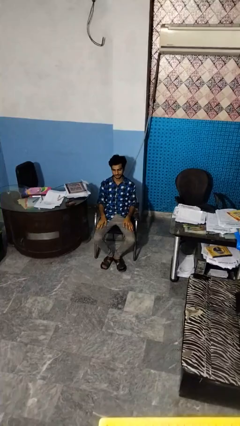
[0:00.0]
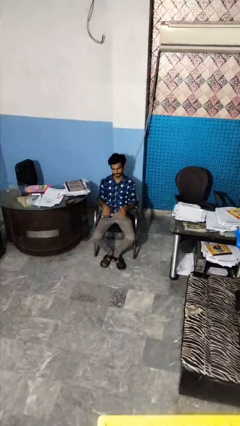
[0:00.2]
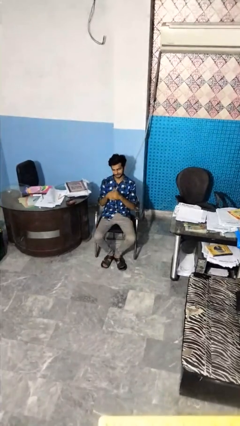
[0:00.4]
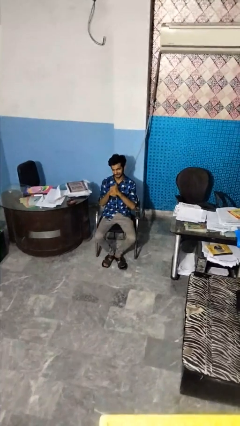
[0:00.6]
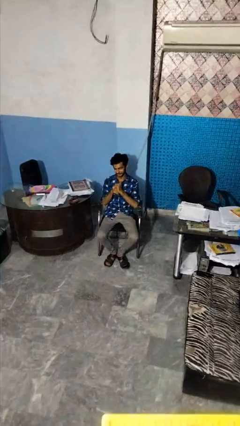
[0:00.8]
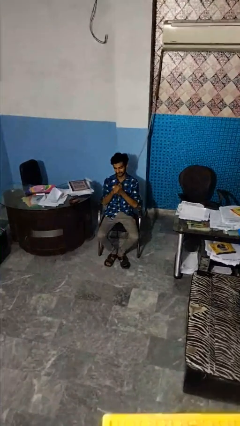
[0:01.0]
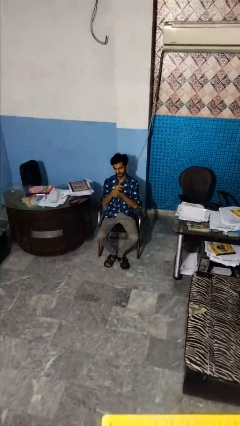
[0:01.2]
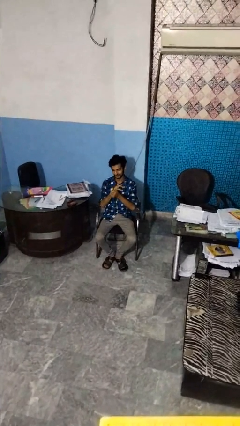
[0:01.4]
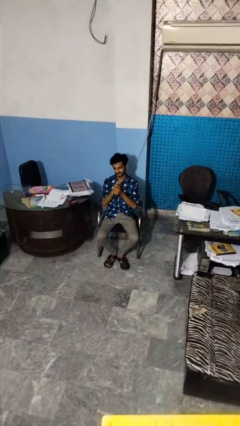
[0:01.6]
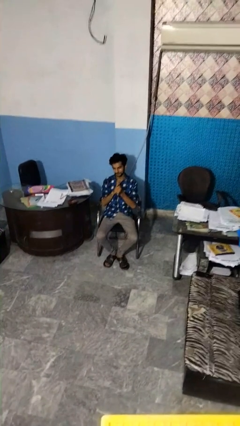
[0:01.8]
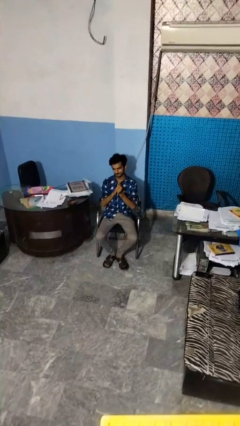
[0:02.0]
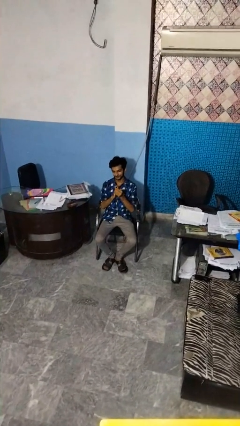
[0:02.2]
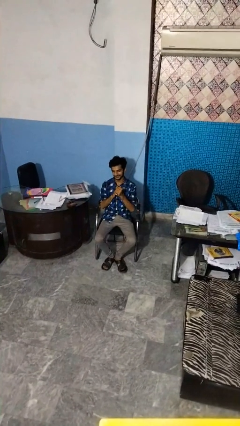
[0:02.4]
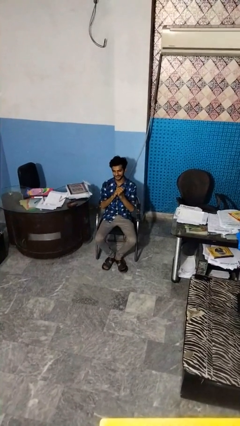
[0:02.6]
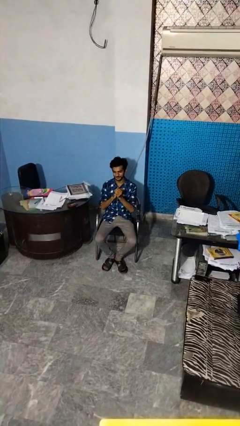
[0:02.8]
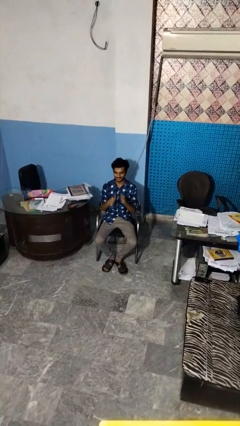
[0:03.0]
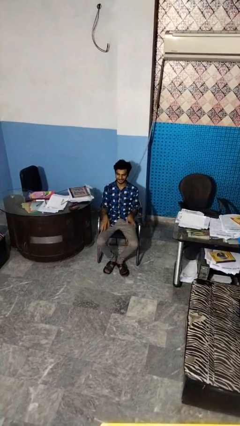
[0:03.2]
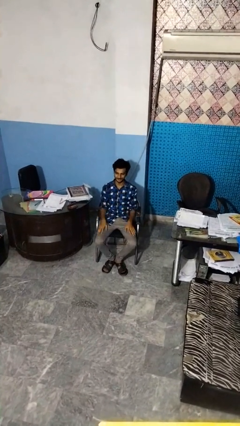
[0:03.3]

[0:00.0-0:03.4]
person cracks knuckles

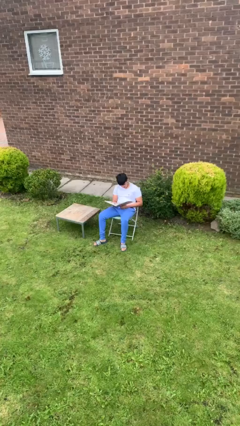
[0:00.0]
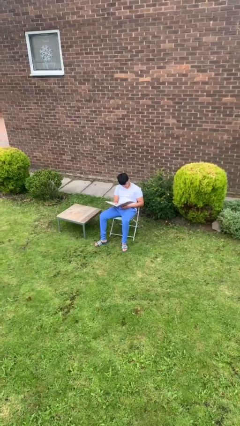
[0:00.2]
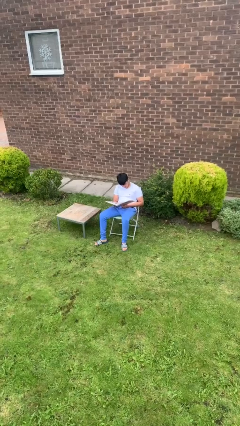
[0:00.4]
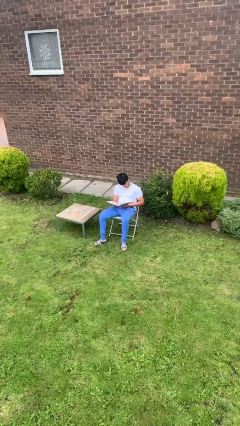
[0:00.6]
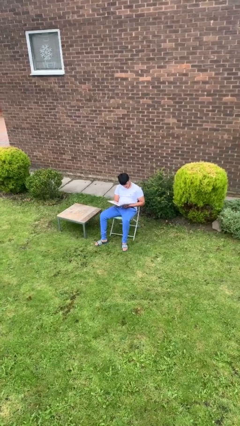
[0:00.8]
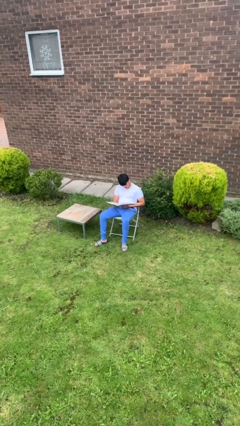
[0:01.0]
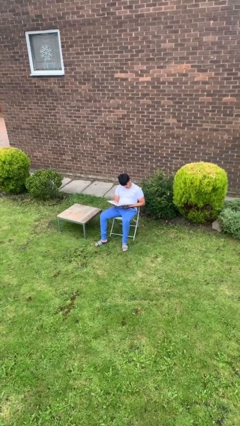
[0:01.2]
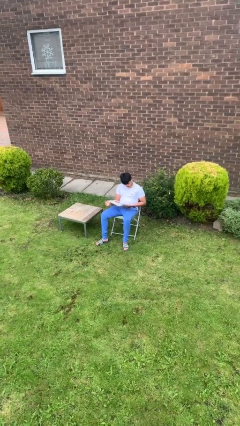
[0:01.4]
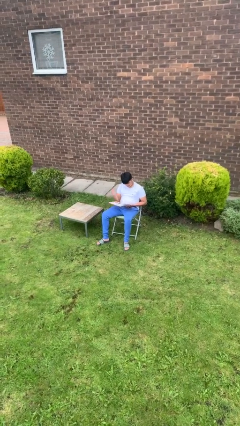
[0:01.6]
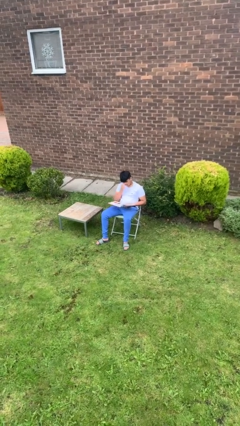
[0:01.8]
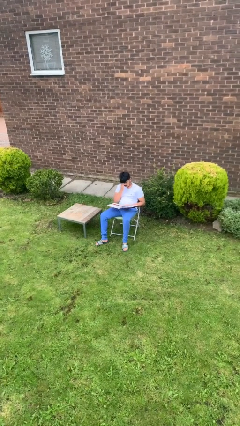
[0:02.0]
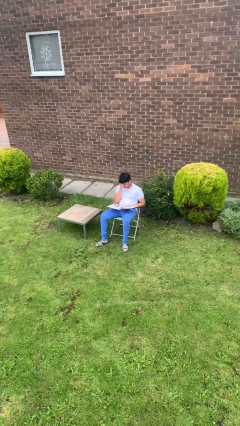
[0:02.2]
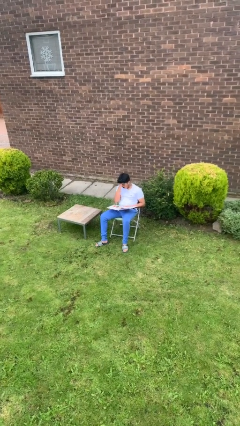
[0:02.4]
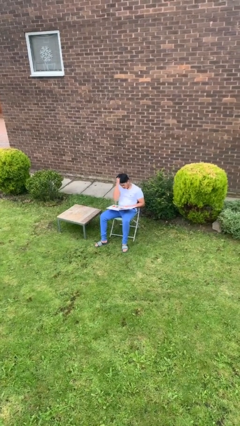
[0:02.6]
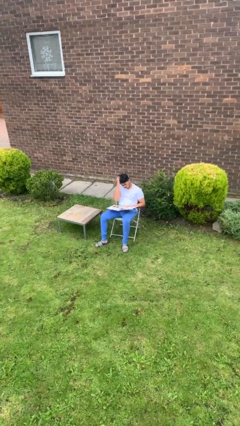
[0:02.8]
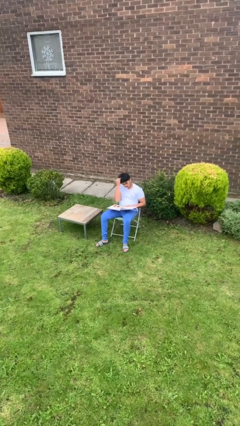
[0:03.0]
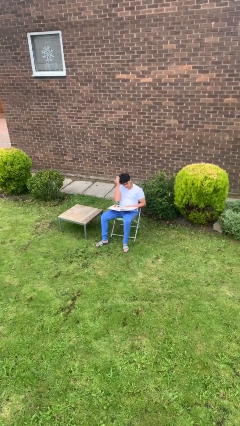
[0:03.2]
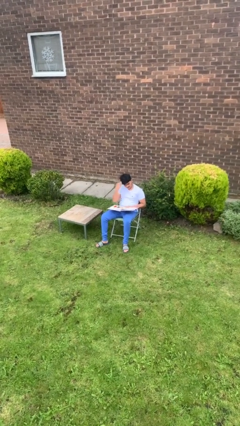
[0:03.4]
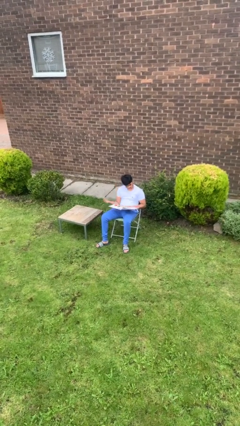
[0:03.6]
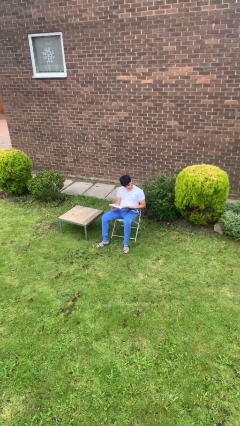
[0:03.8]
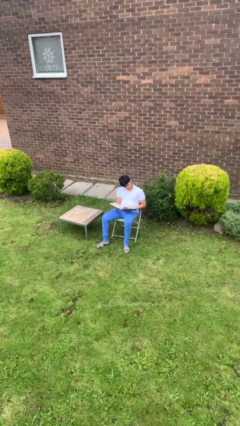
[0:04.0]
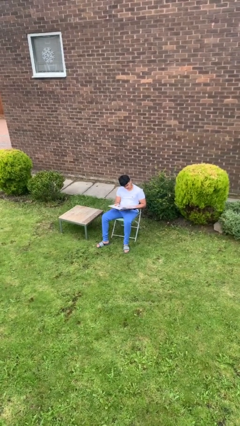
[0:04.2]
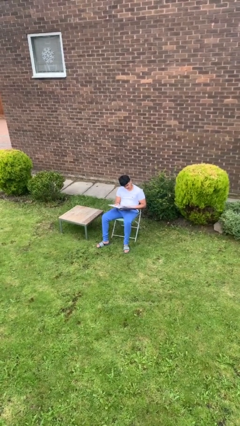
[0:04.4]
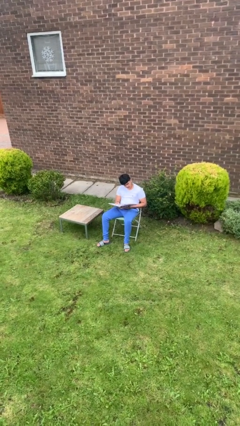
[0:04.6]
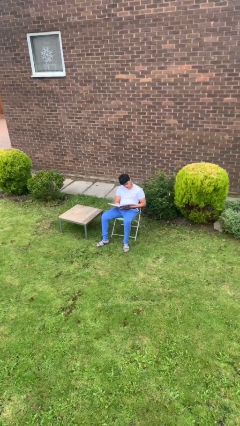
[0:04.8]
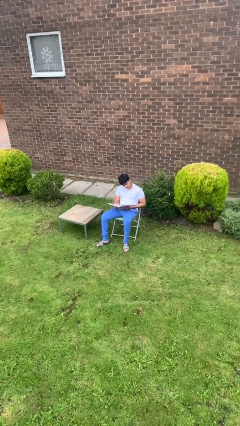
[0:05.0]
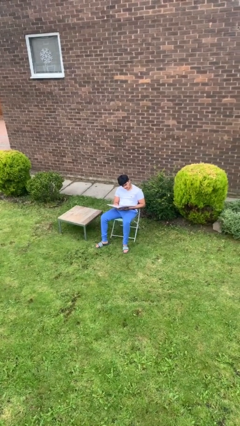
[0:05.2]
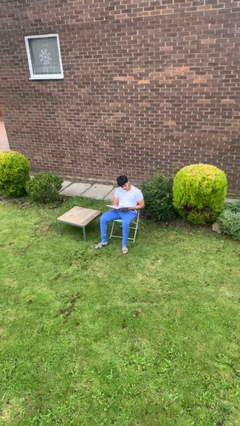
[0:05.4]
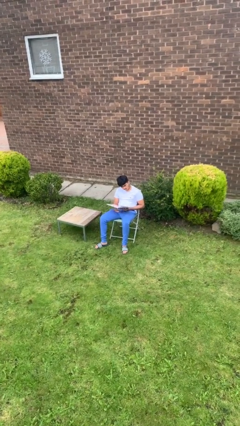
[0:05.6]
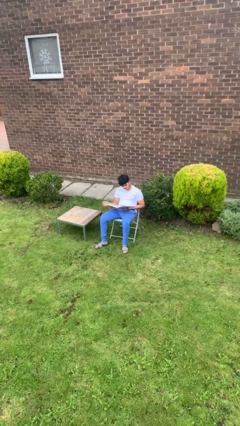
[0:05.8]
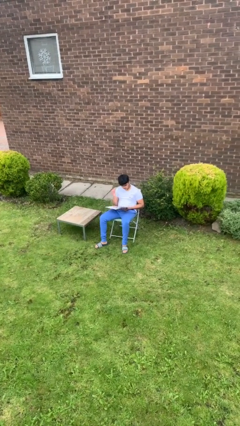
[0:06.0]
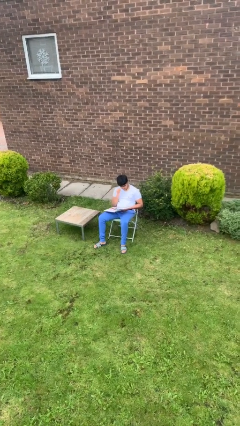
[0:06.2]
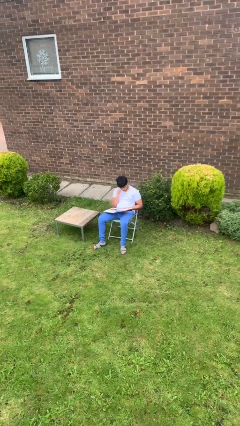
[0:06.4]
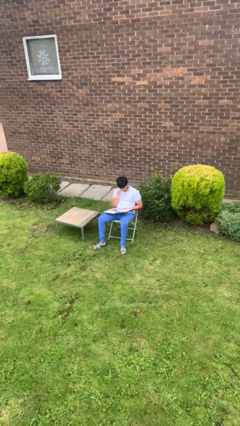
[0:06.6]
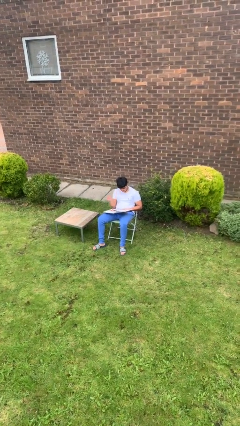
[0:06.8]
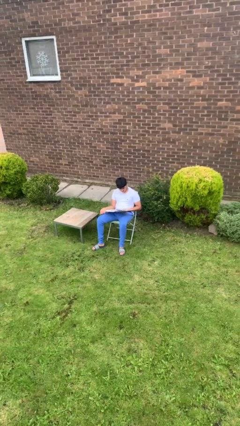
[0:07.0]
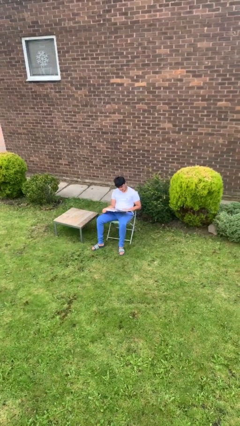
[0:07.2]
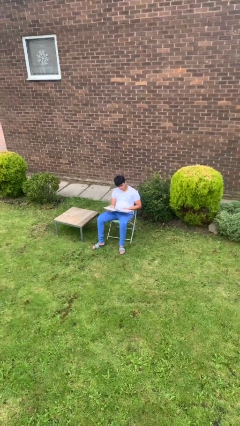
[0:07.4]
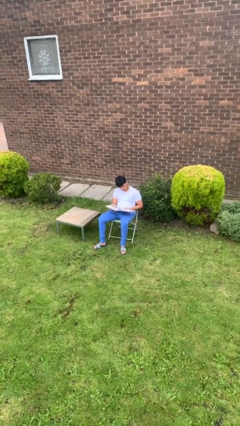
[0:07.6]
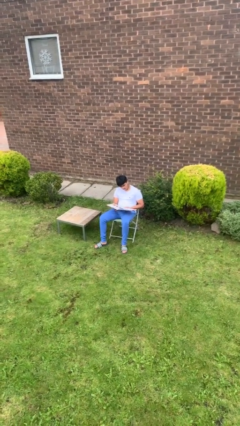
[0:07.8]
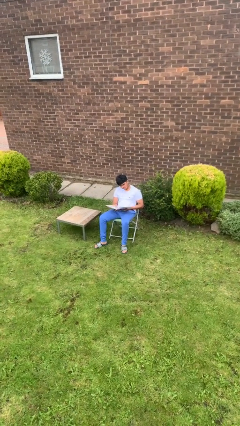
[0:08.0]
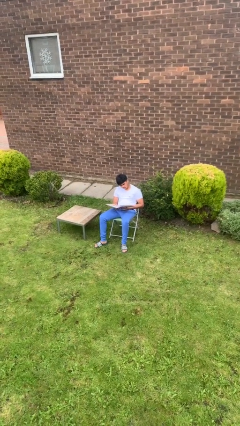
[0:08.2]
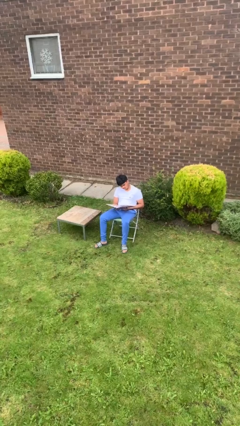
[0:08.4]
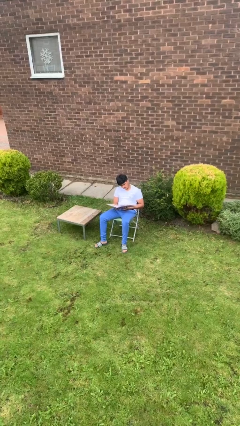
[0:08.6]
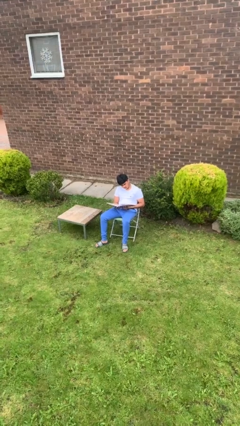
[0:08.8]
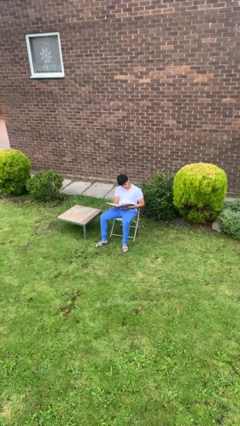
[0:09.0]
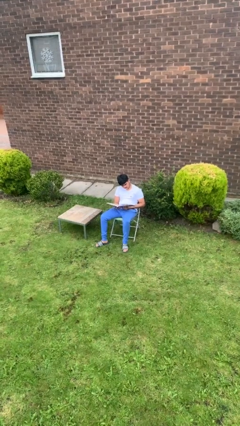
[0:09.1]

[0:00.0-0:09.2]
person reads document

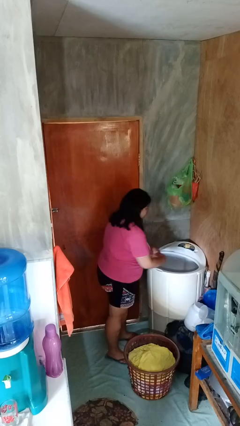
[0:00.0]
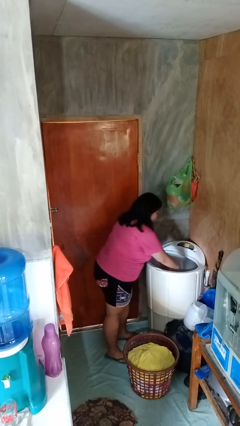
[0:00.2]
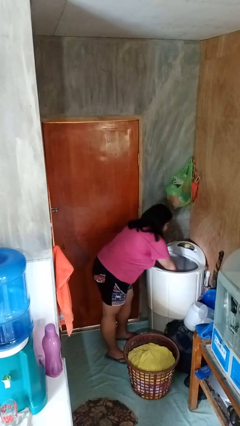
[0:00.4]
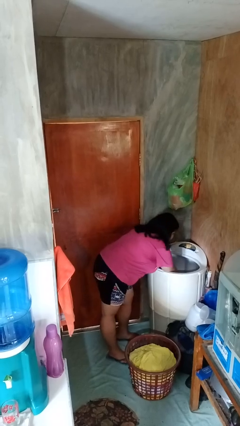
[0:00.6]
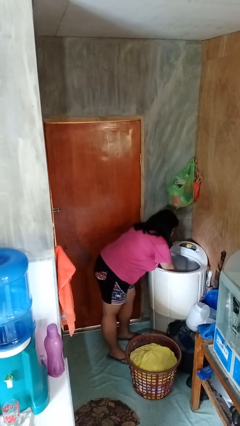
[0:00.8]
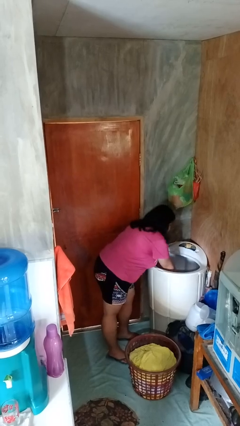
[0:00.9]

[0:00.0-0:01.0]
person unloads clotheswasher

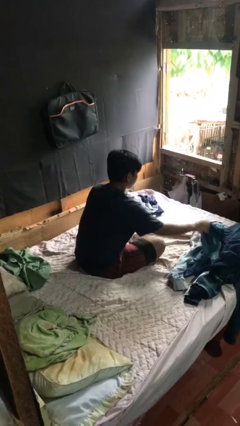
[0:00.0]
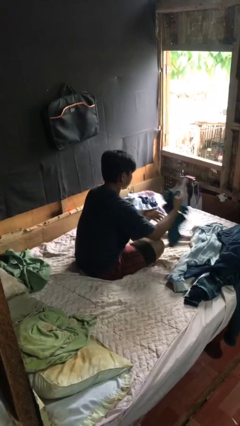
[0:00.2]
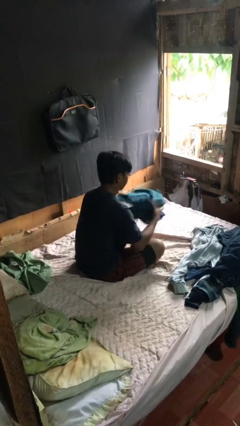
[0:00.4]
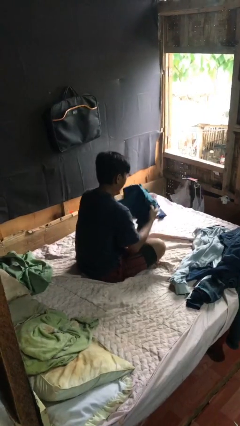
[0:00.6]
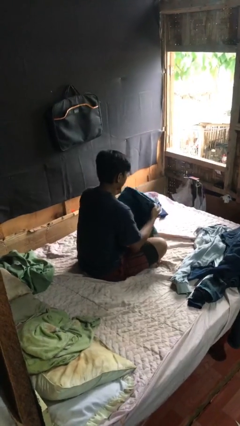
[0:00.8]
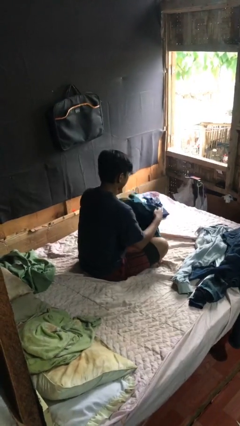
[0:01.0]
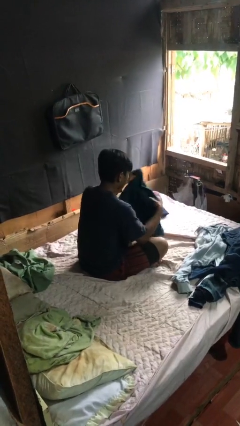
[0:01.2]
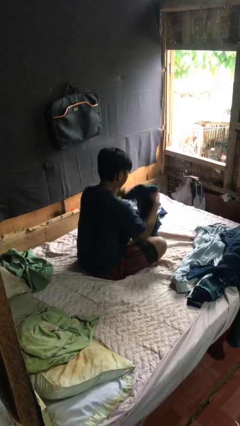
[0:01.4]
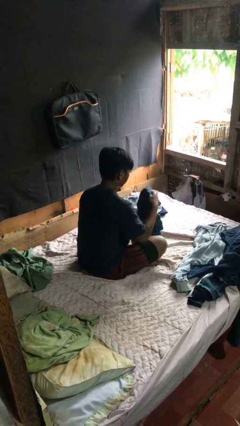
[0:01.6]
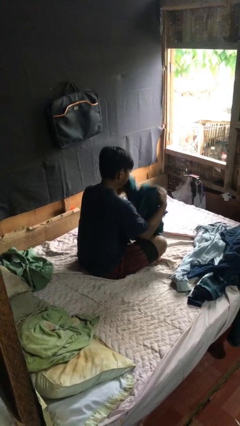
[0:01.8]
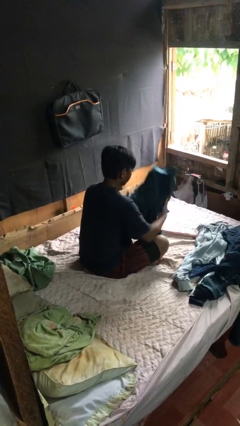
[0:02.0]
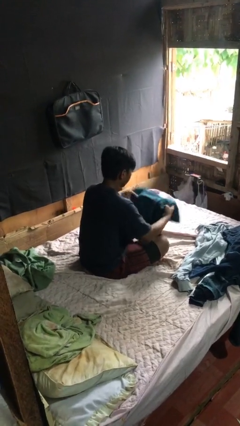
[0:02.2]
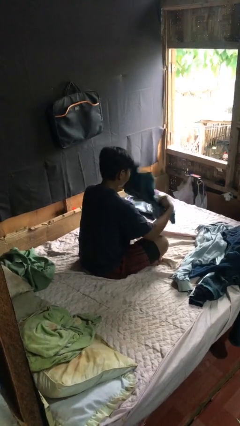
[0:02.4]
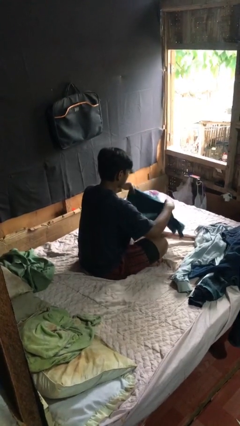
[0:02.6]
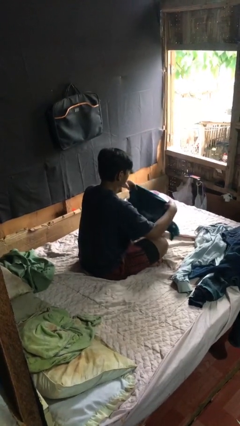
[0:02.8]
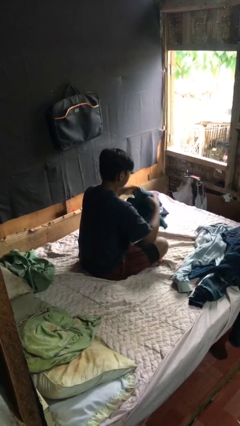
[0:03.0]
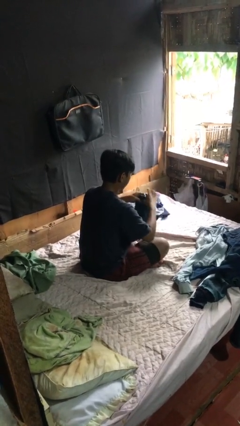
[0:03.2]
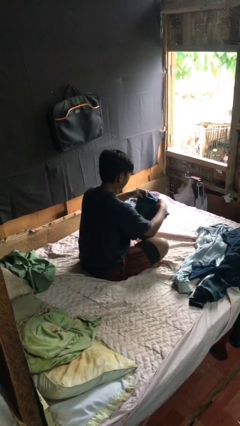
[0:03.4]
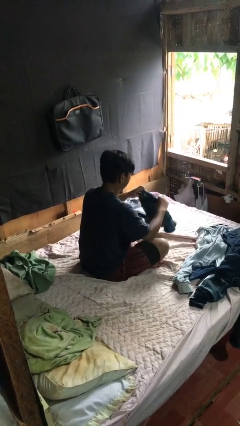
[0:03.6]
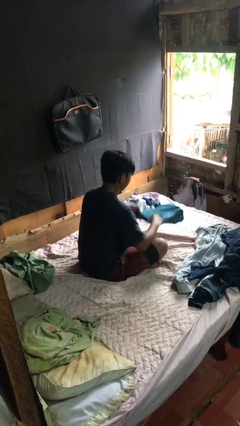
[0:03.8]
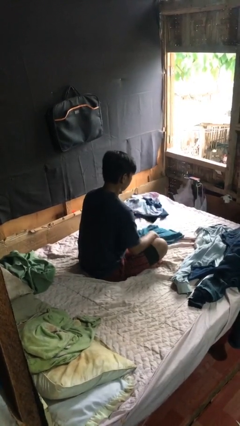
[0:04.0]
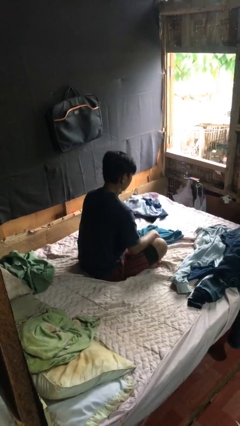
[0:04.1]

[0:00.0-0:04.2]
person folds shirt
